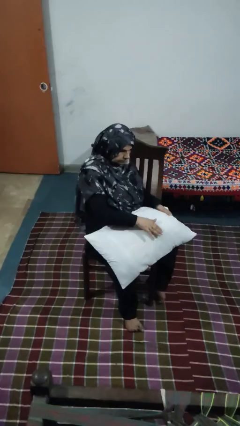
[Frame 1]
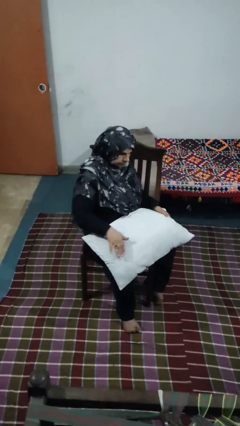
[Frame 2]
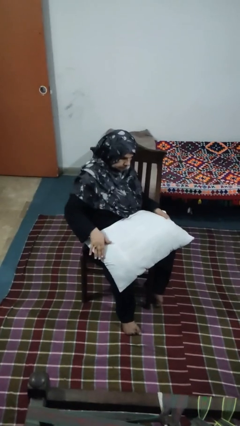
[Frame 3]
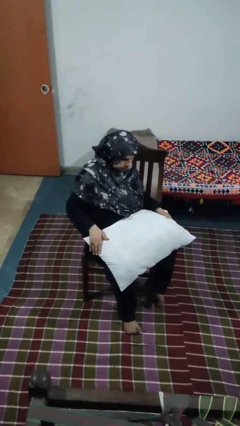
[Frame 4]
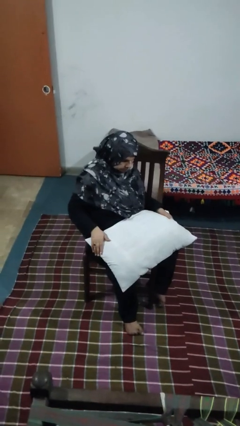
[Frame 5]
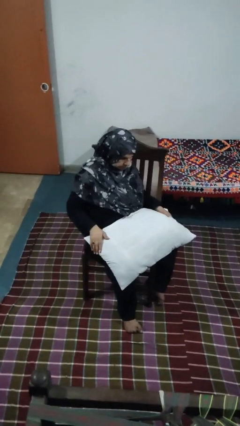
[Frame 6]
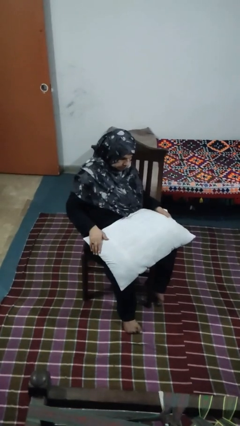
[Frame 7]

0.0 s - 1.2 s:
person waves hand over object

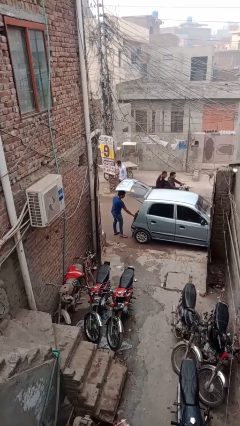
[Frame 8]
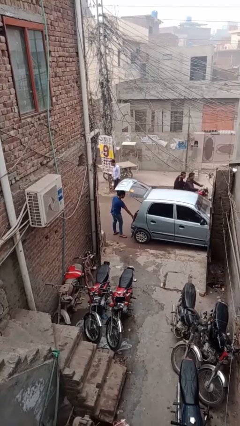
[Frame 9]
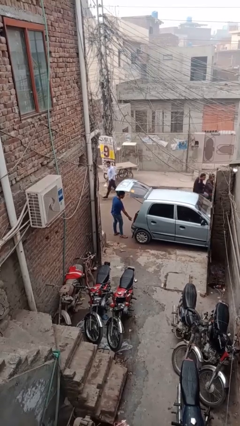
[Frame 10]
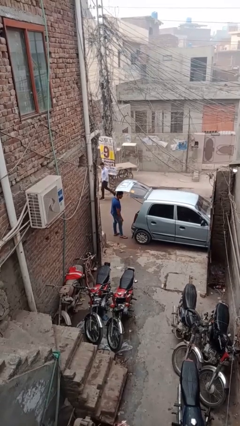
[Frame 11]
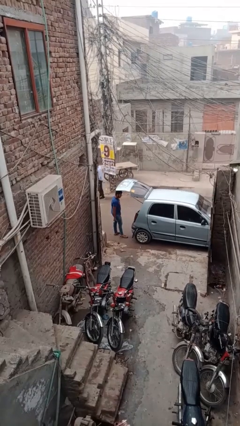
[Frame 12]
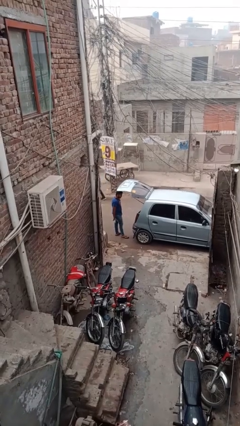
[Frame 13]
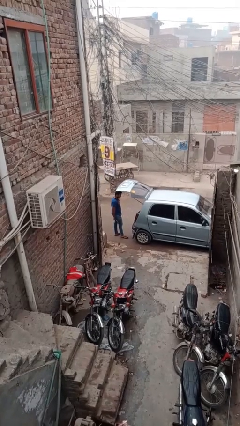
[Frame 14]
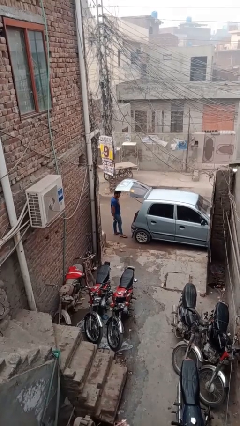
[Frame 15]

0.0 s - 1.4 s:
person loads car

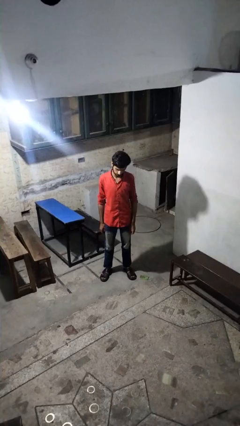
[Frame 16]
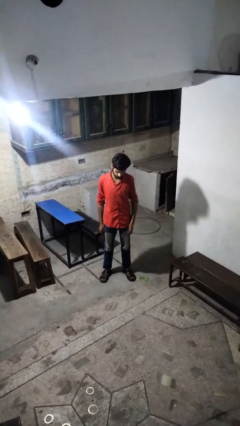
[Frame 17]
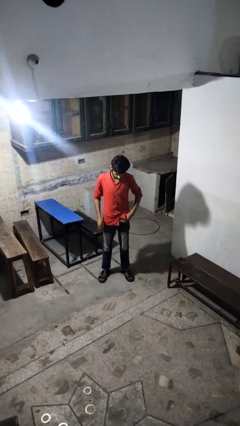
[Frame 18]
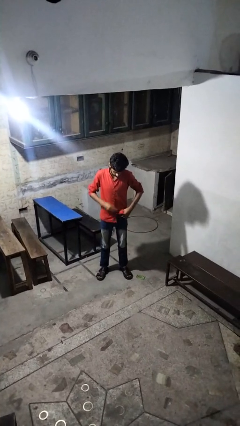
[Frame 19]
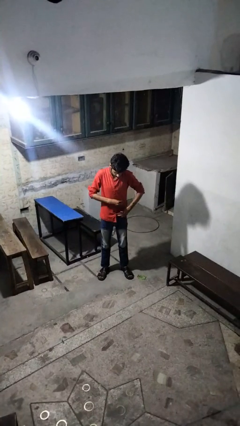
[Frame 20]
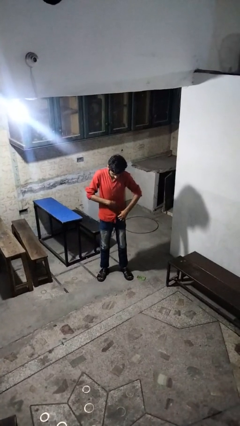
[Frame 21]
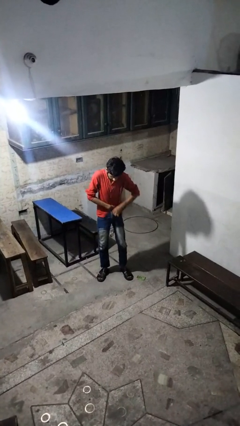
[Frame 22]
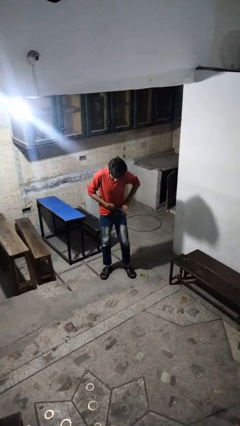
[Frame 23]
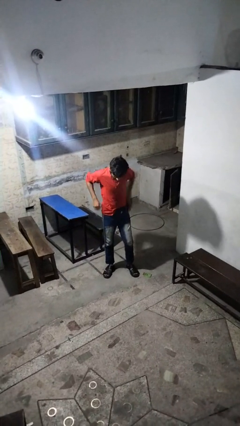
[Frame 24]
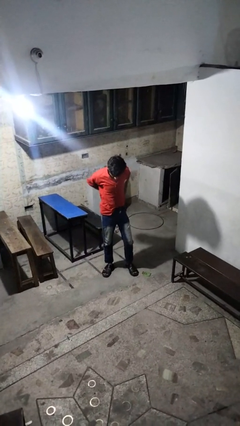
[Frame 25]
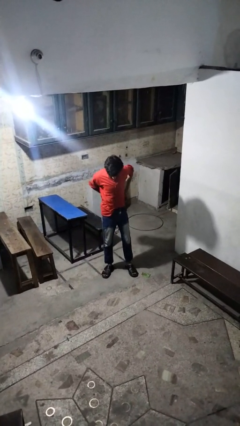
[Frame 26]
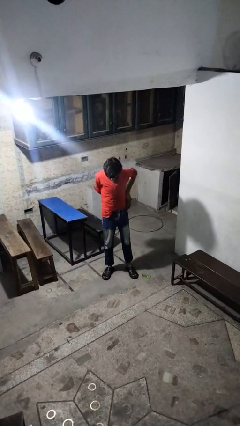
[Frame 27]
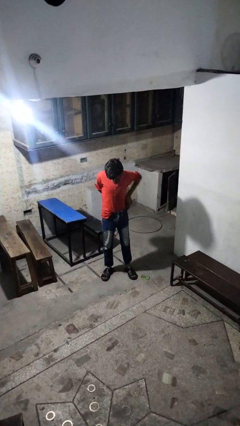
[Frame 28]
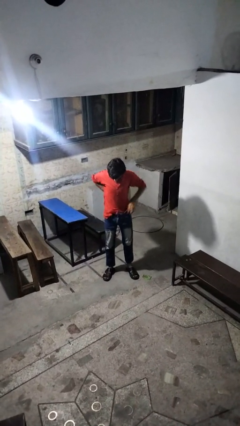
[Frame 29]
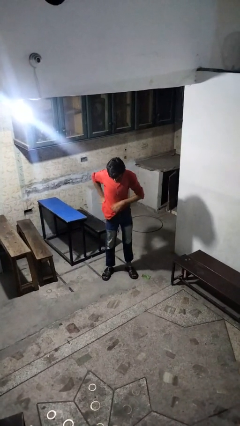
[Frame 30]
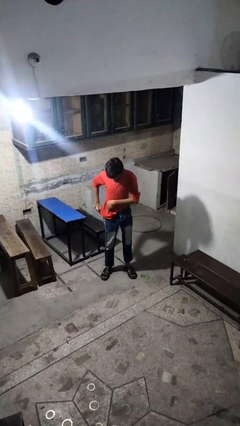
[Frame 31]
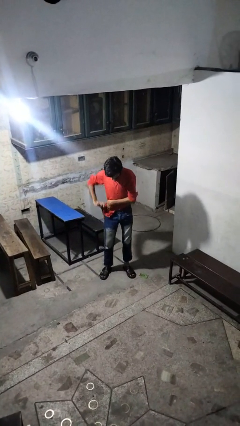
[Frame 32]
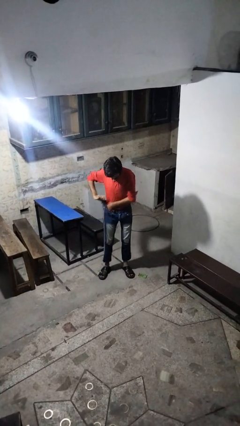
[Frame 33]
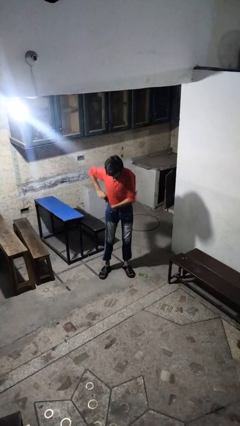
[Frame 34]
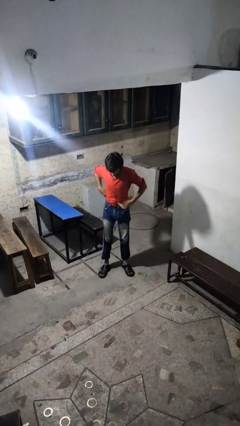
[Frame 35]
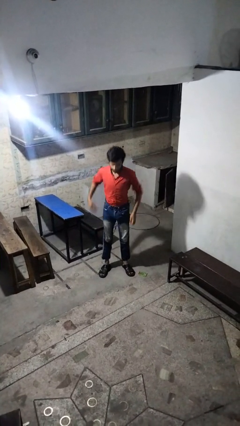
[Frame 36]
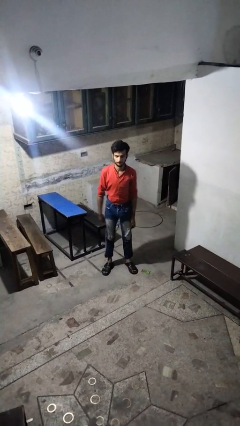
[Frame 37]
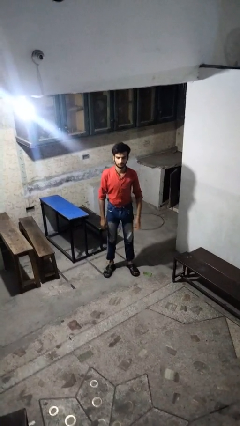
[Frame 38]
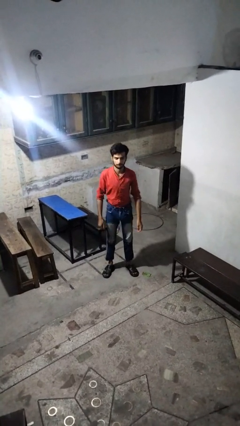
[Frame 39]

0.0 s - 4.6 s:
person tucks in shirt

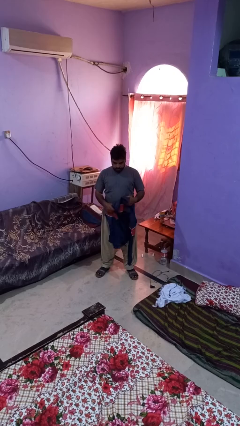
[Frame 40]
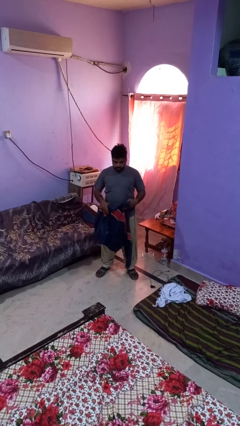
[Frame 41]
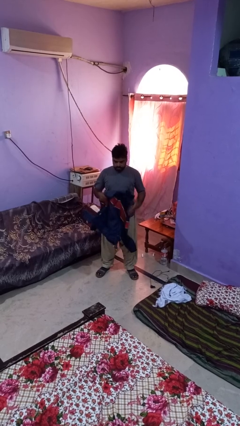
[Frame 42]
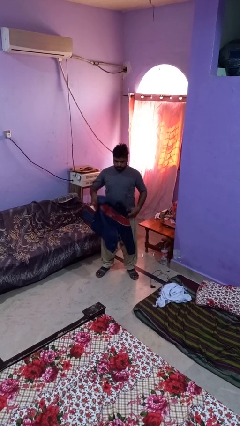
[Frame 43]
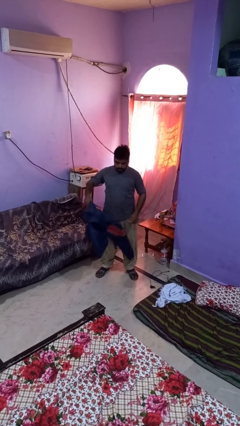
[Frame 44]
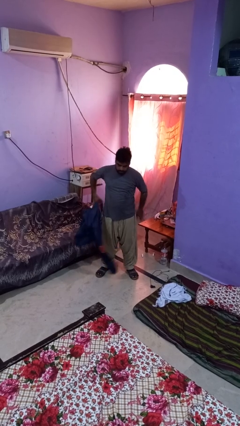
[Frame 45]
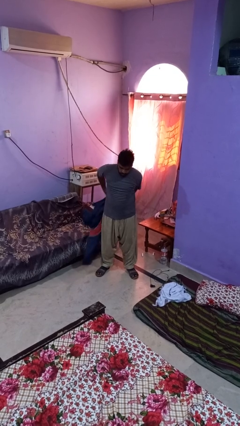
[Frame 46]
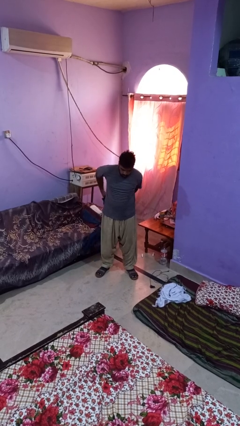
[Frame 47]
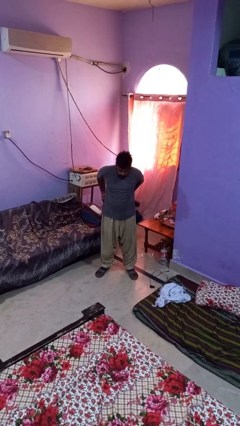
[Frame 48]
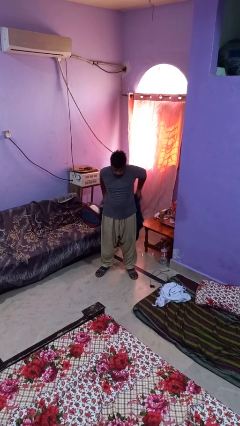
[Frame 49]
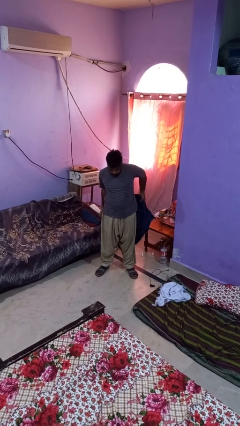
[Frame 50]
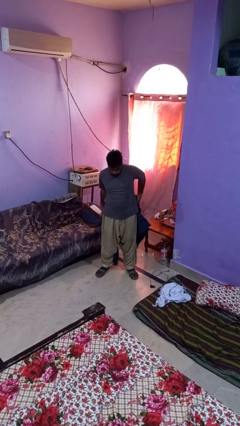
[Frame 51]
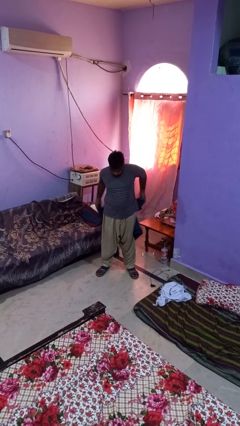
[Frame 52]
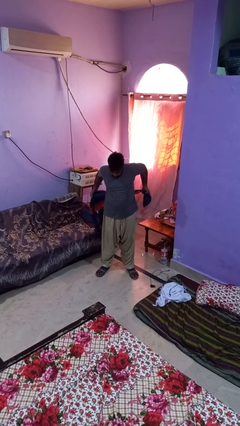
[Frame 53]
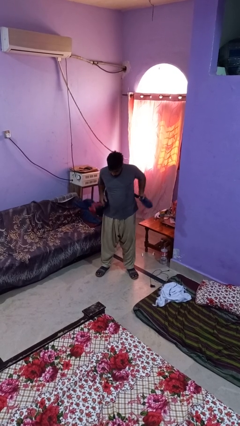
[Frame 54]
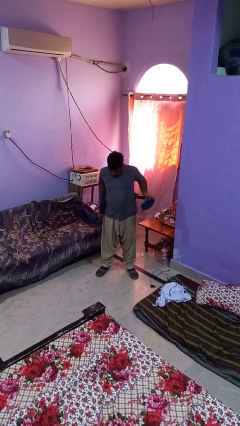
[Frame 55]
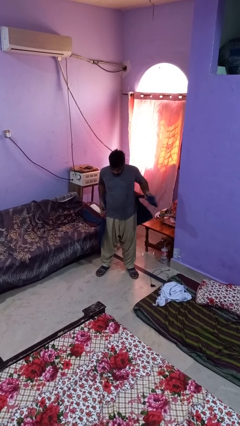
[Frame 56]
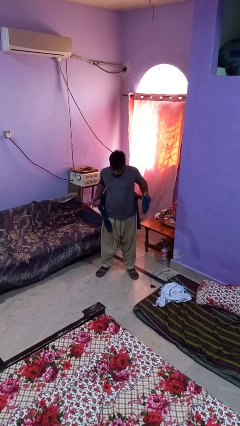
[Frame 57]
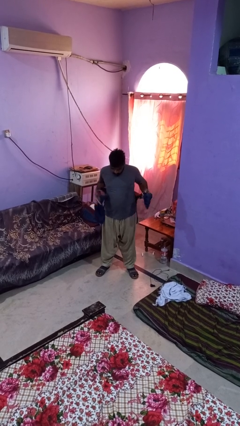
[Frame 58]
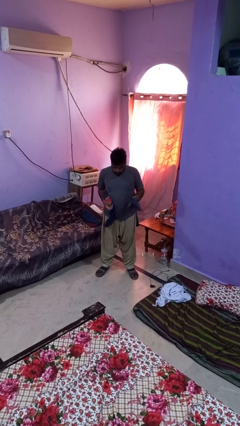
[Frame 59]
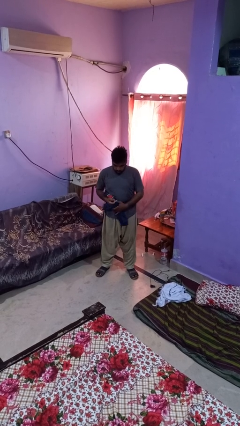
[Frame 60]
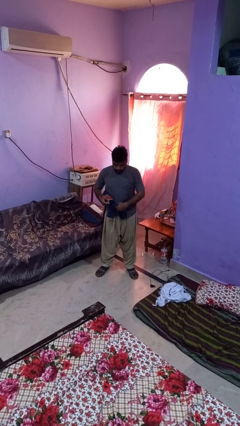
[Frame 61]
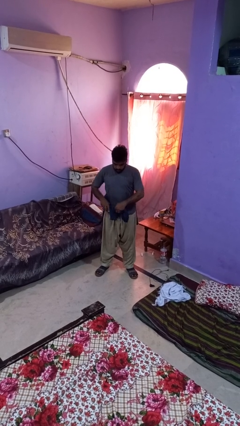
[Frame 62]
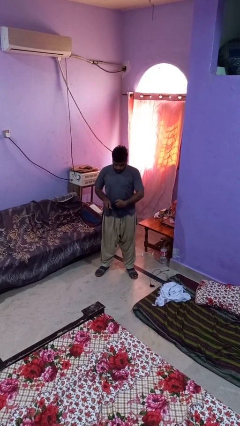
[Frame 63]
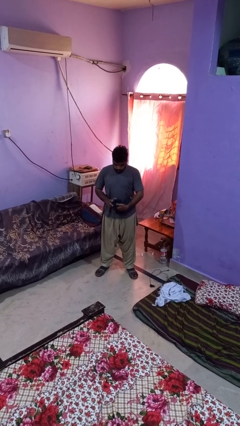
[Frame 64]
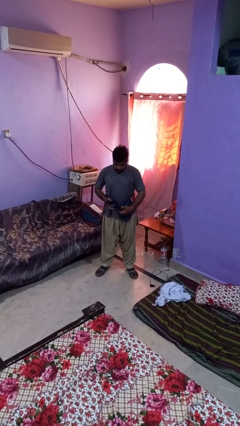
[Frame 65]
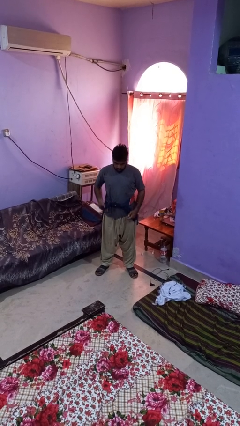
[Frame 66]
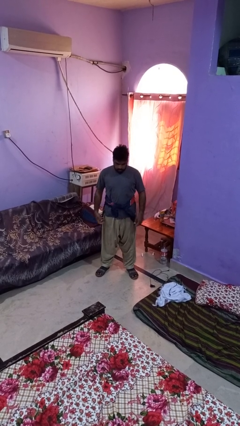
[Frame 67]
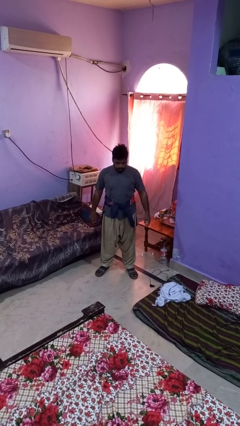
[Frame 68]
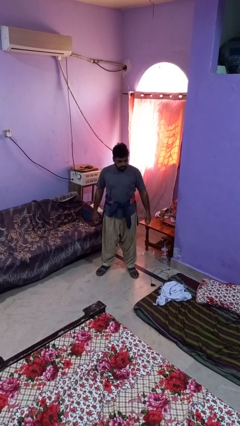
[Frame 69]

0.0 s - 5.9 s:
person ties jacket around waist

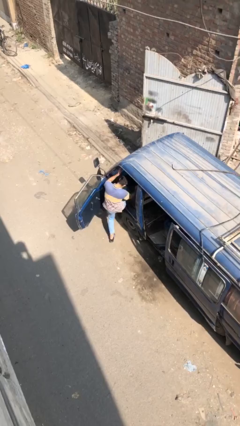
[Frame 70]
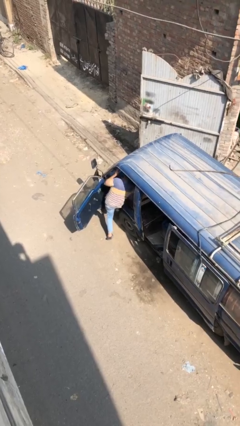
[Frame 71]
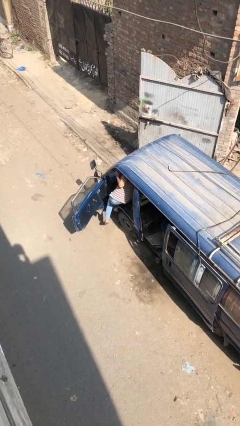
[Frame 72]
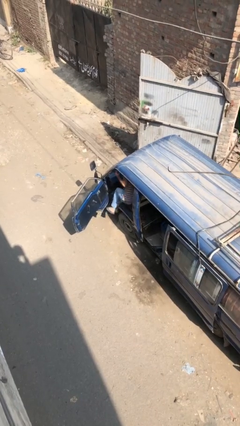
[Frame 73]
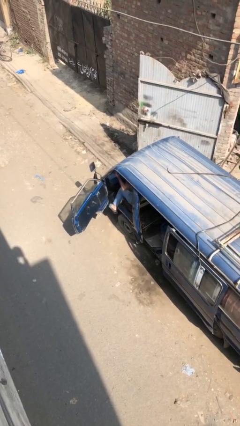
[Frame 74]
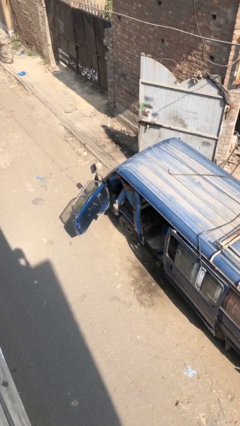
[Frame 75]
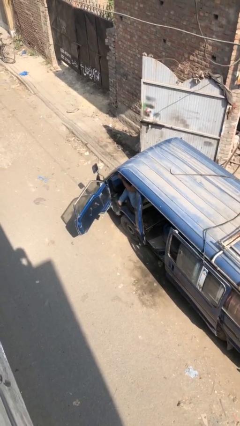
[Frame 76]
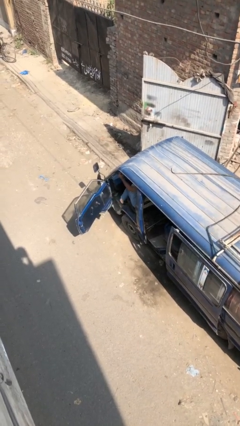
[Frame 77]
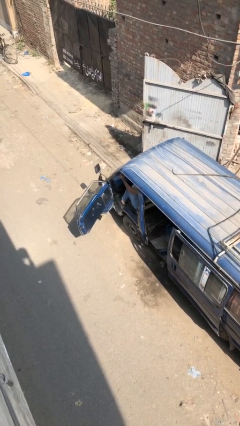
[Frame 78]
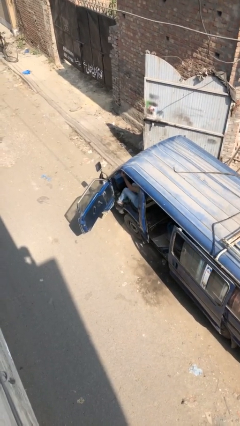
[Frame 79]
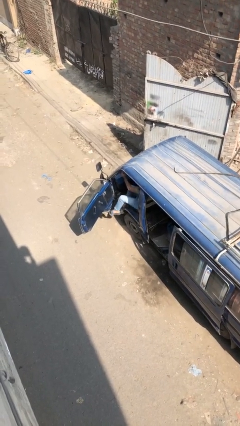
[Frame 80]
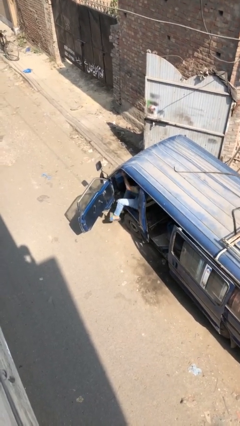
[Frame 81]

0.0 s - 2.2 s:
person enters car

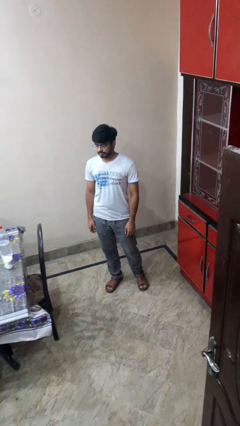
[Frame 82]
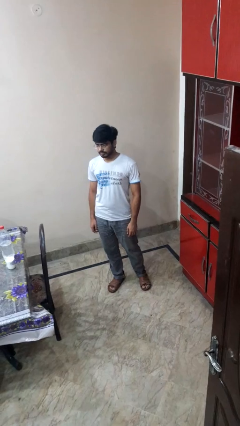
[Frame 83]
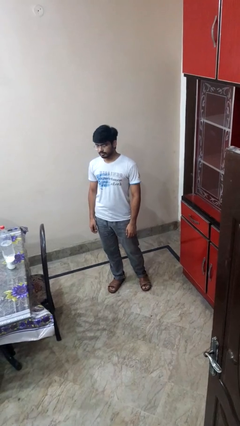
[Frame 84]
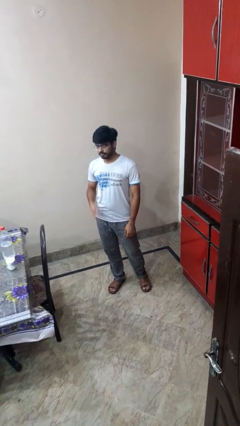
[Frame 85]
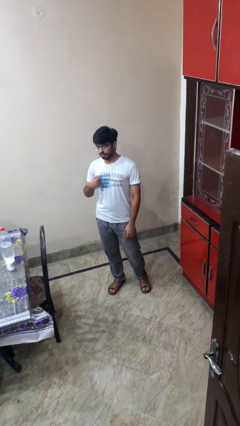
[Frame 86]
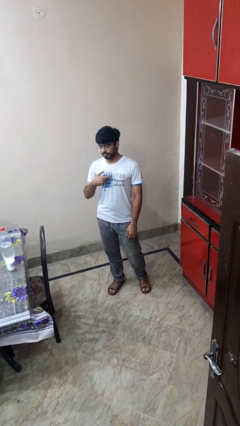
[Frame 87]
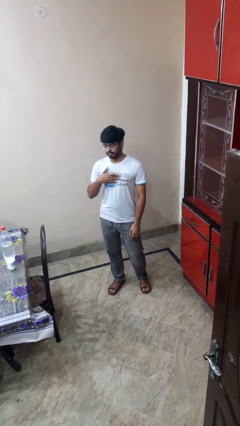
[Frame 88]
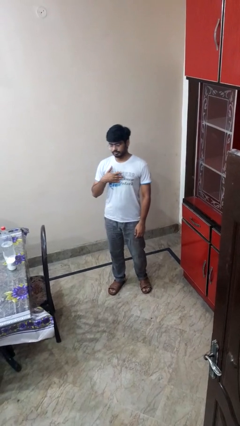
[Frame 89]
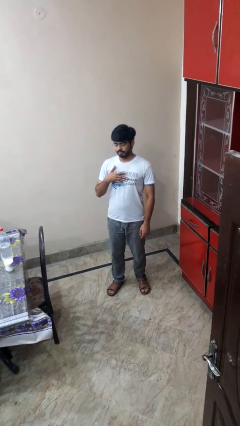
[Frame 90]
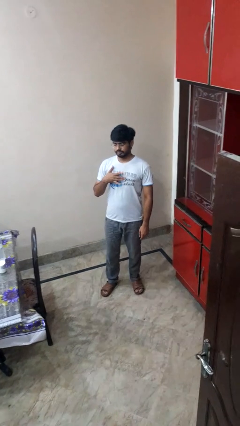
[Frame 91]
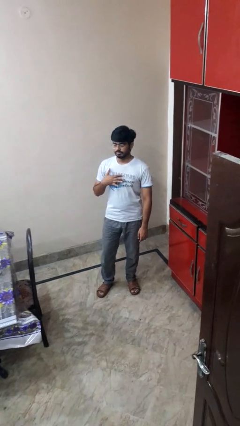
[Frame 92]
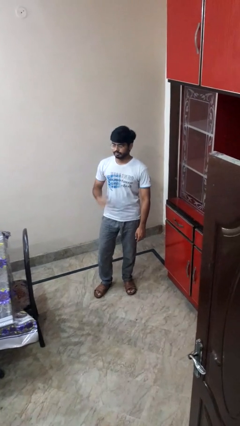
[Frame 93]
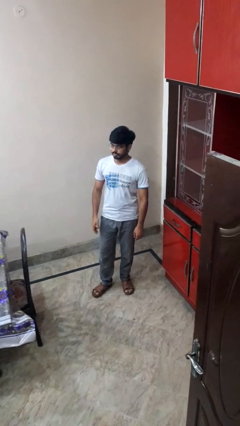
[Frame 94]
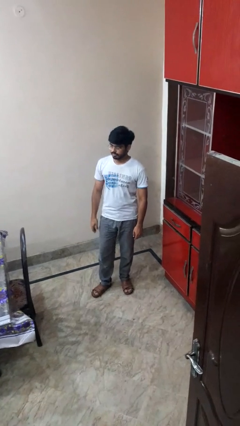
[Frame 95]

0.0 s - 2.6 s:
person drums on chest
